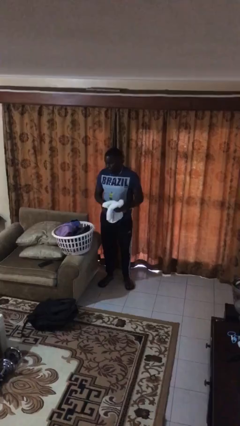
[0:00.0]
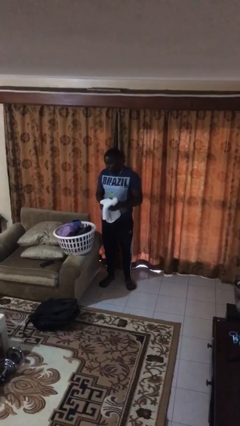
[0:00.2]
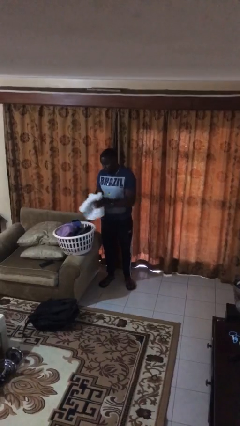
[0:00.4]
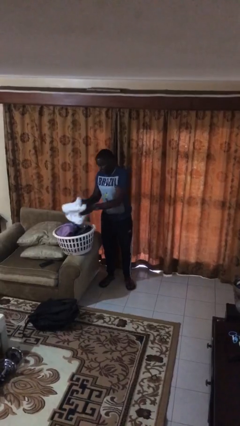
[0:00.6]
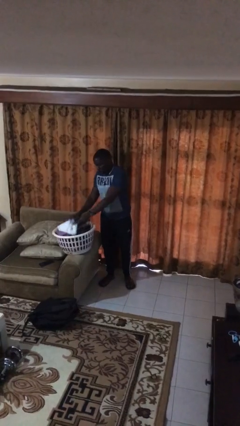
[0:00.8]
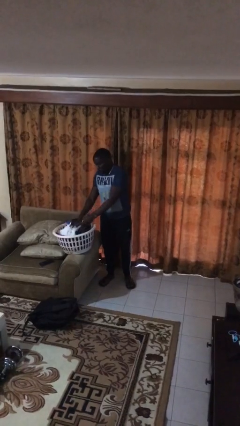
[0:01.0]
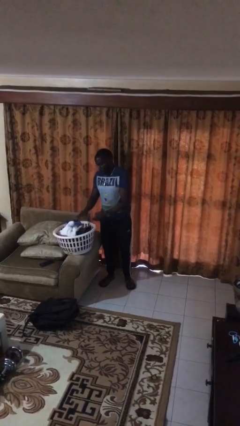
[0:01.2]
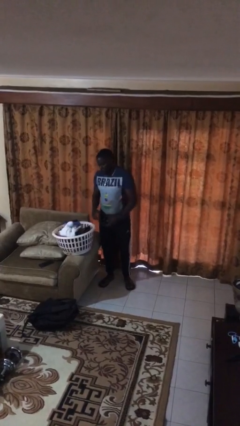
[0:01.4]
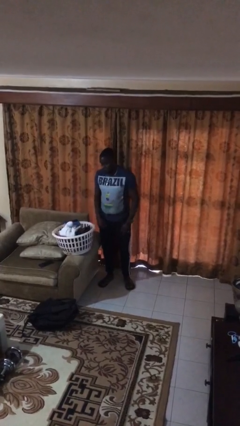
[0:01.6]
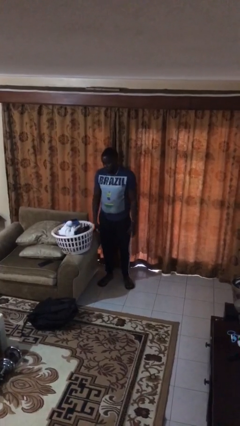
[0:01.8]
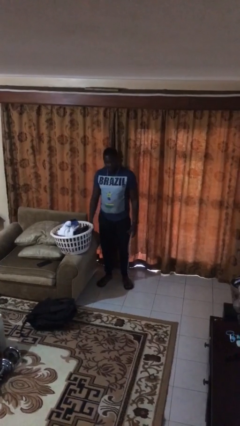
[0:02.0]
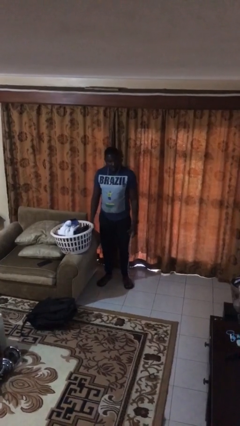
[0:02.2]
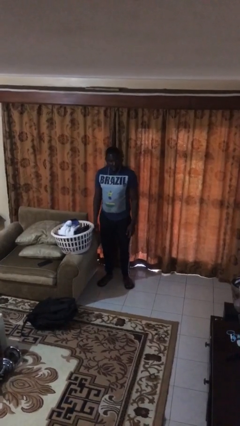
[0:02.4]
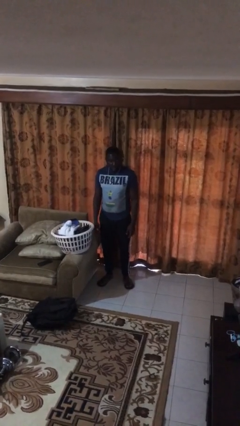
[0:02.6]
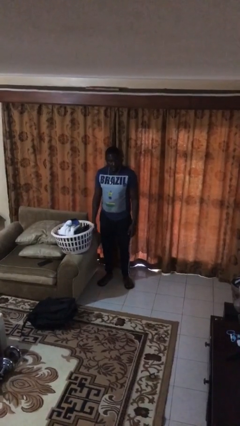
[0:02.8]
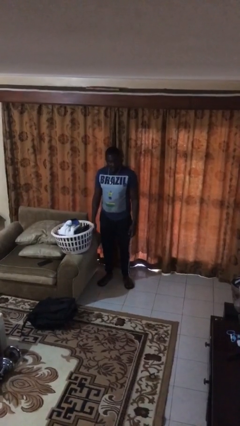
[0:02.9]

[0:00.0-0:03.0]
person puts object into basket

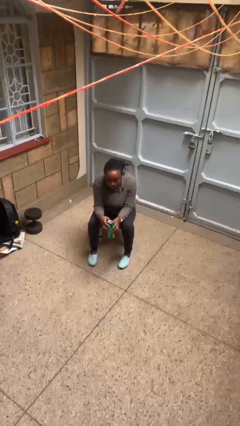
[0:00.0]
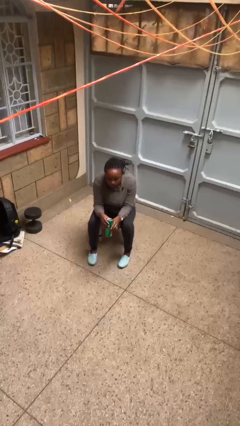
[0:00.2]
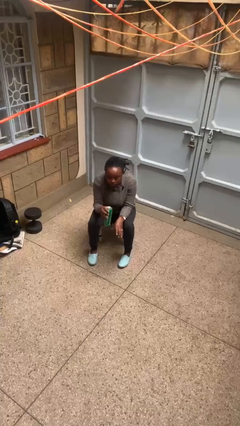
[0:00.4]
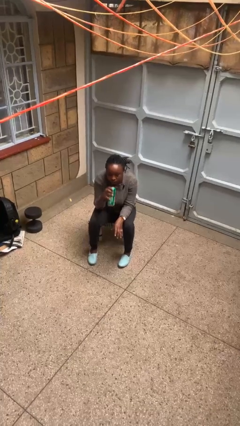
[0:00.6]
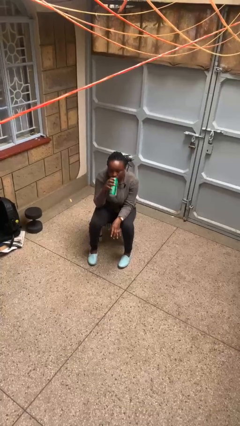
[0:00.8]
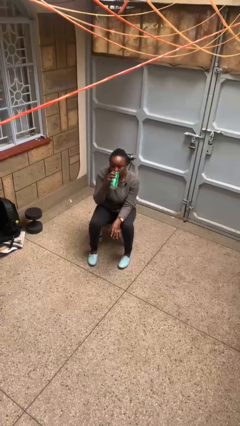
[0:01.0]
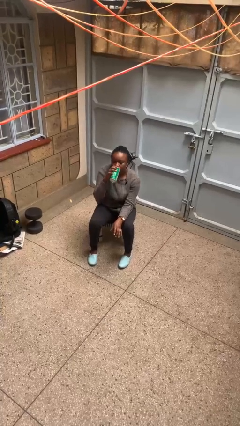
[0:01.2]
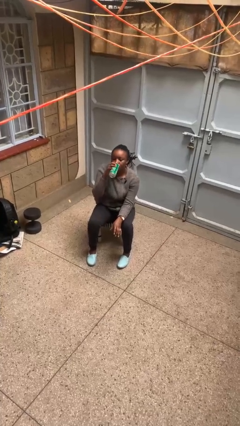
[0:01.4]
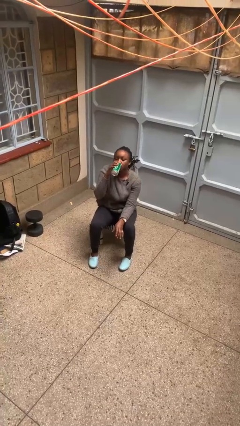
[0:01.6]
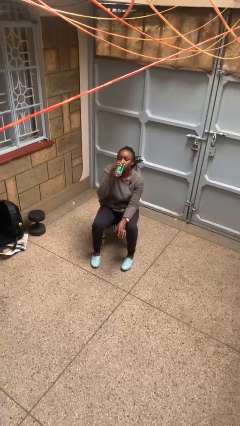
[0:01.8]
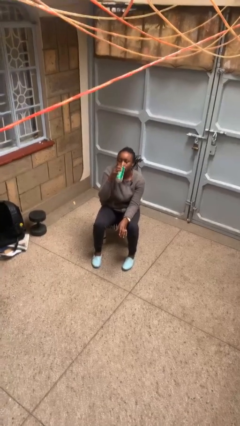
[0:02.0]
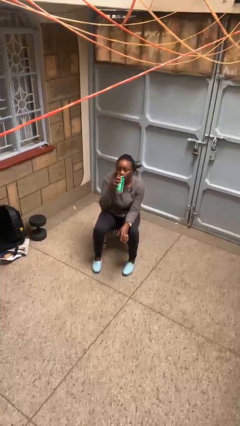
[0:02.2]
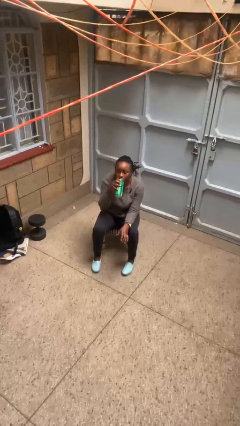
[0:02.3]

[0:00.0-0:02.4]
person drinks from beverage can

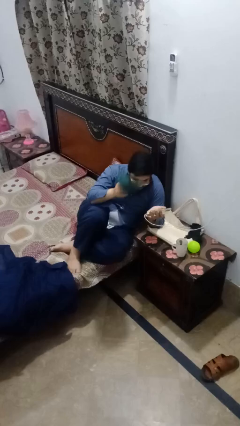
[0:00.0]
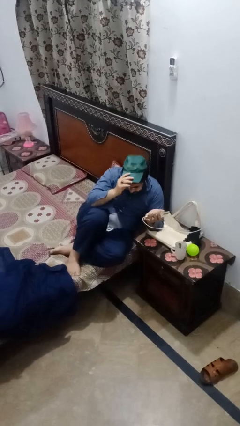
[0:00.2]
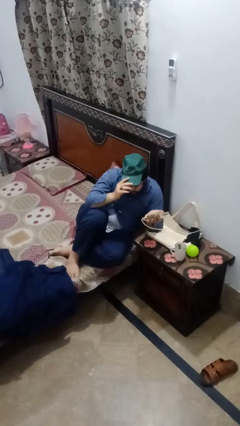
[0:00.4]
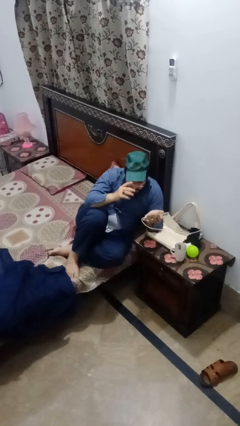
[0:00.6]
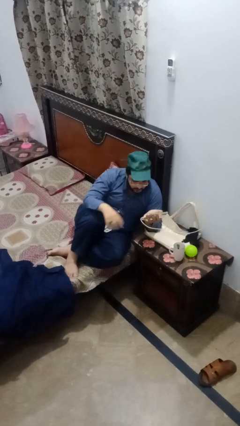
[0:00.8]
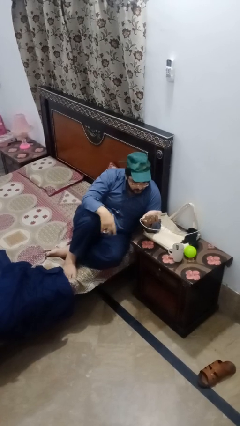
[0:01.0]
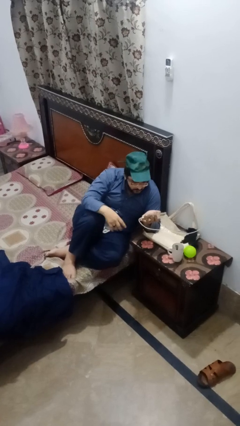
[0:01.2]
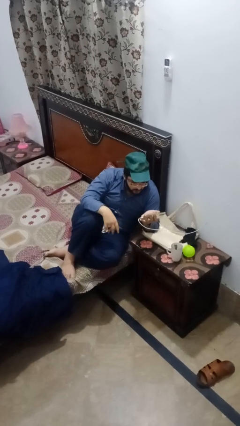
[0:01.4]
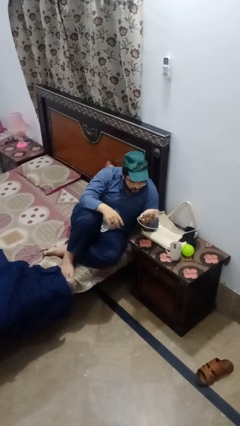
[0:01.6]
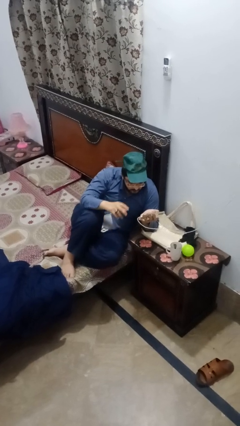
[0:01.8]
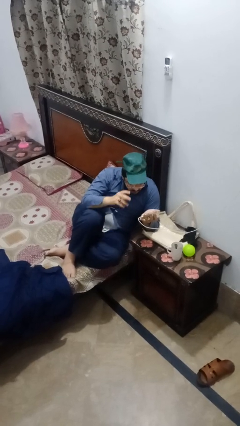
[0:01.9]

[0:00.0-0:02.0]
person puts on hat

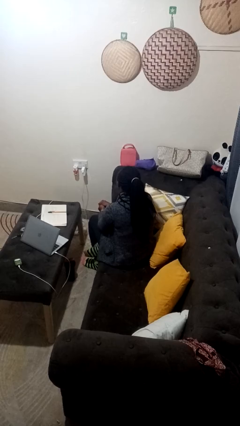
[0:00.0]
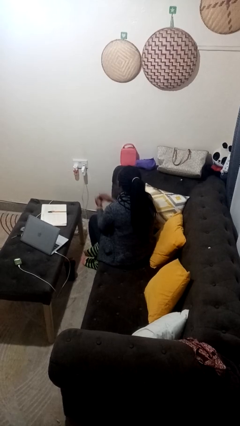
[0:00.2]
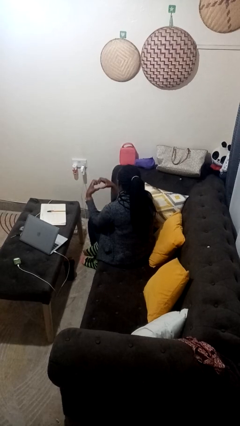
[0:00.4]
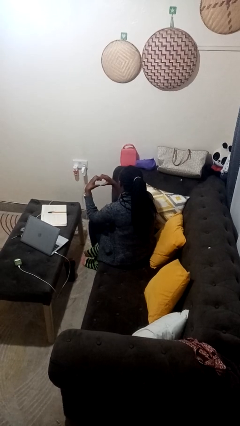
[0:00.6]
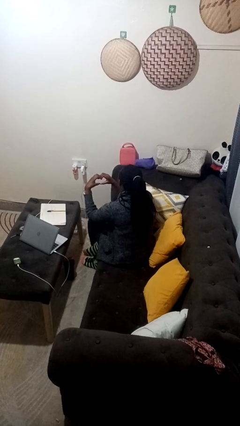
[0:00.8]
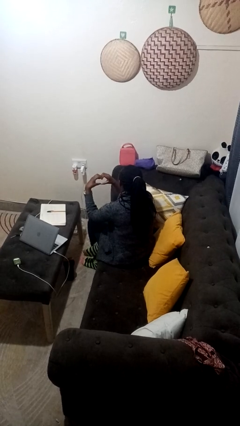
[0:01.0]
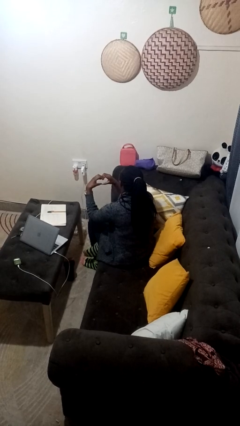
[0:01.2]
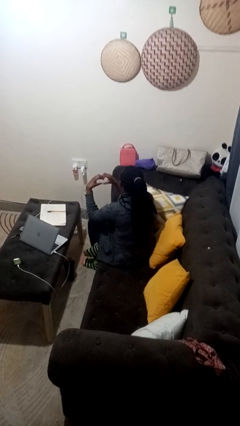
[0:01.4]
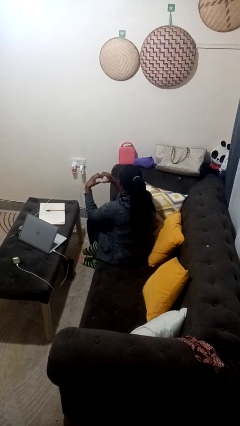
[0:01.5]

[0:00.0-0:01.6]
person gestures heart

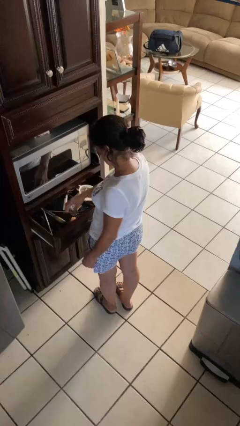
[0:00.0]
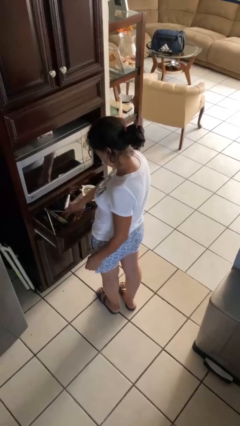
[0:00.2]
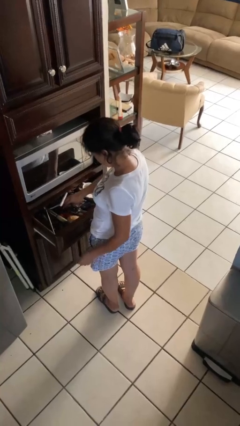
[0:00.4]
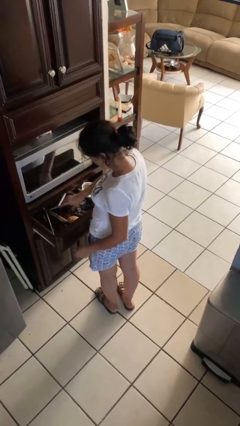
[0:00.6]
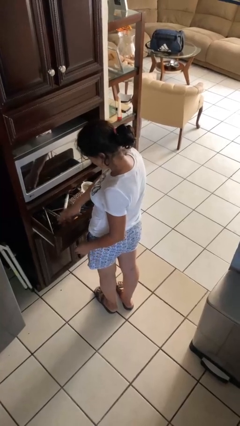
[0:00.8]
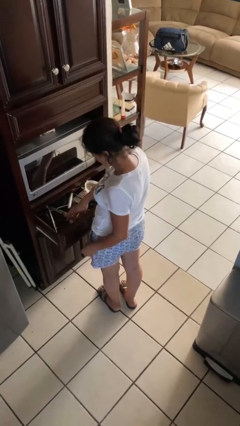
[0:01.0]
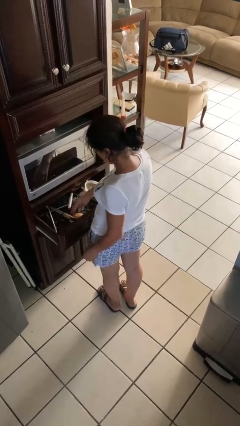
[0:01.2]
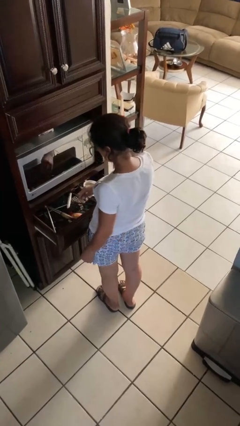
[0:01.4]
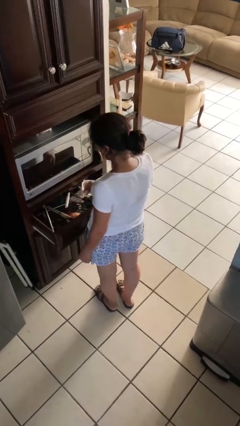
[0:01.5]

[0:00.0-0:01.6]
person searches in kitchen drawer

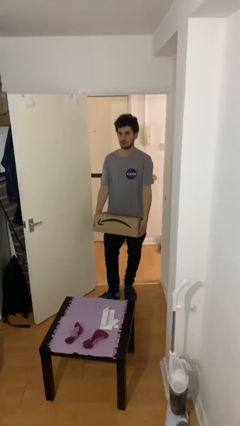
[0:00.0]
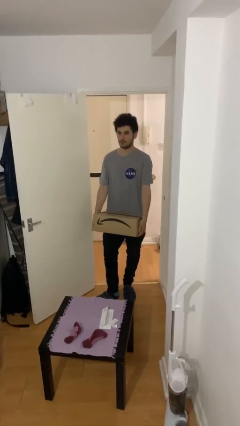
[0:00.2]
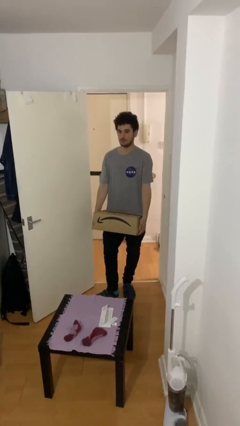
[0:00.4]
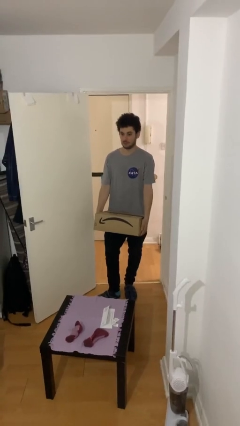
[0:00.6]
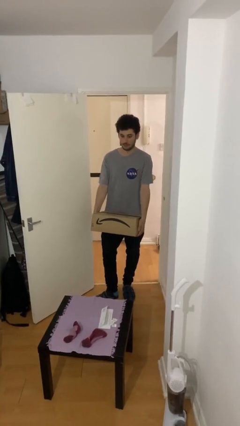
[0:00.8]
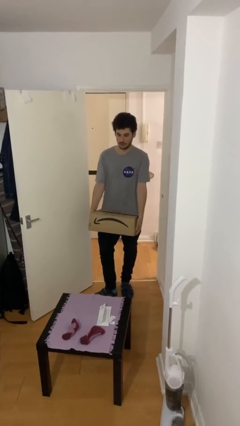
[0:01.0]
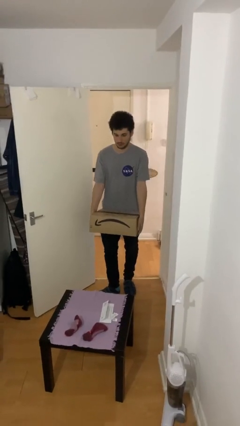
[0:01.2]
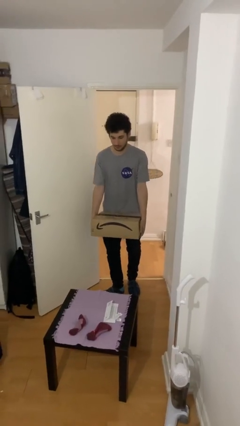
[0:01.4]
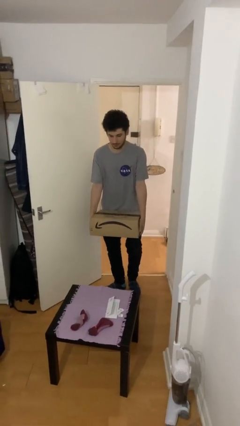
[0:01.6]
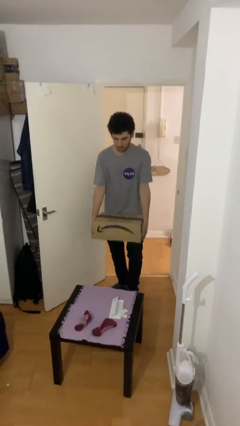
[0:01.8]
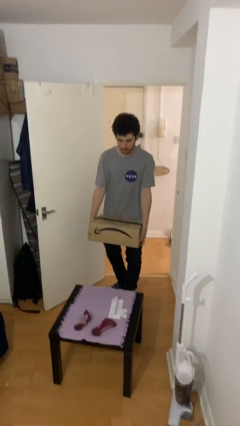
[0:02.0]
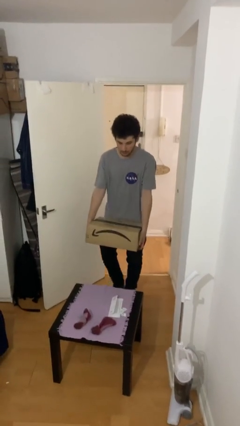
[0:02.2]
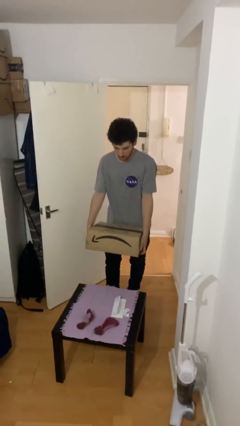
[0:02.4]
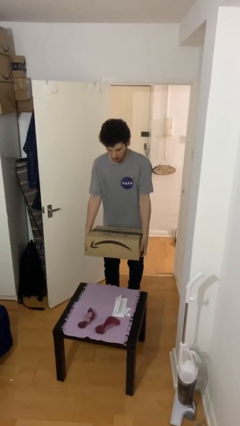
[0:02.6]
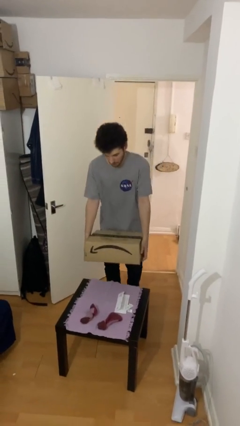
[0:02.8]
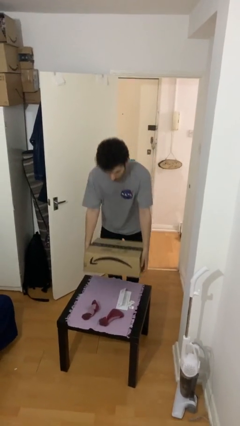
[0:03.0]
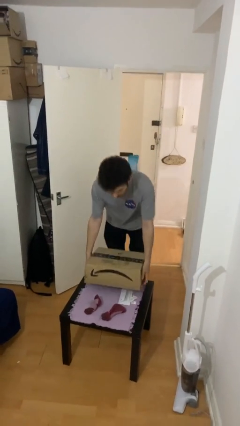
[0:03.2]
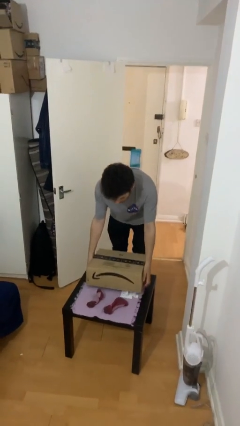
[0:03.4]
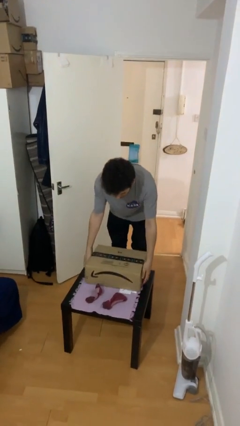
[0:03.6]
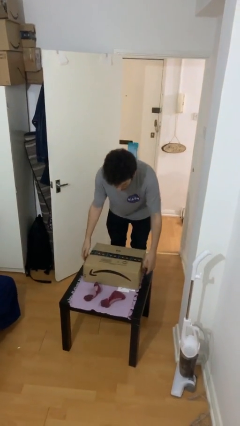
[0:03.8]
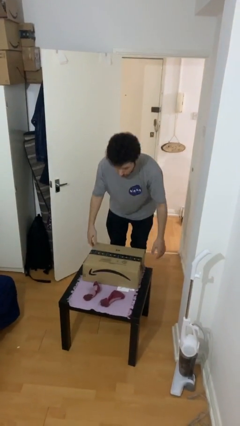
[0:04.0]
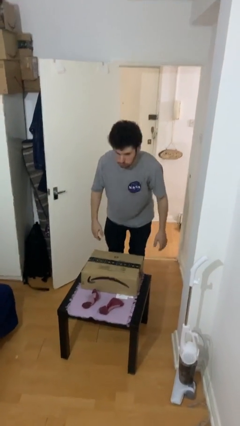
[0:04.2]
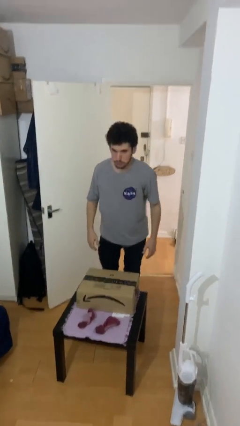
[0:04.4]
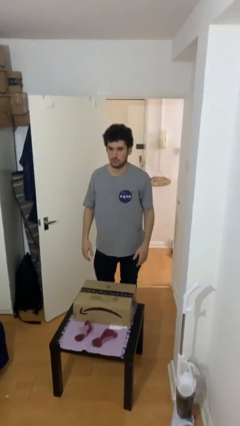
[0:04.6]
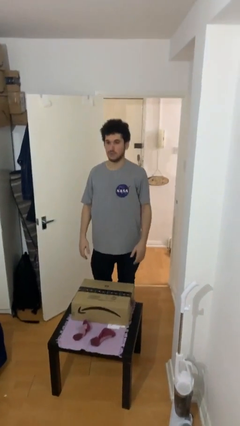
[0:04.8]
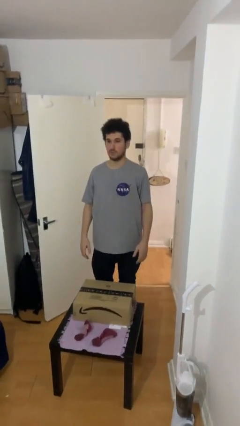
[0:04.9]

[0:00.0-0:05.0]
person puts down object on table

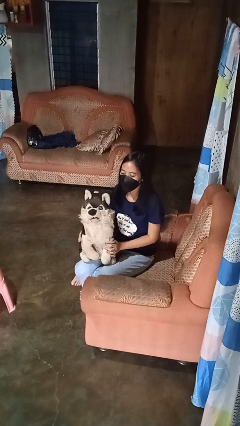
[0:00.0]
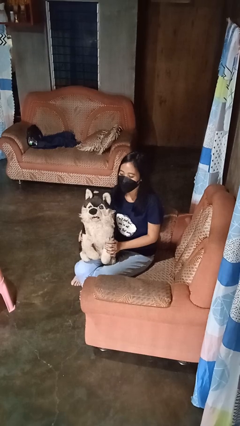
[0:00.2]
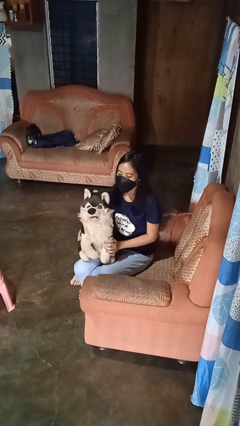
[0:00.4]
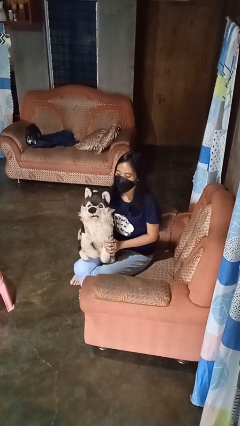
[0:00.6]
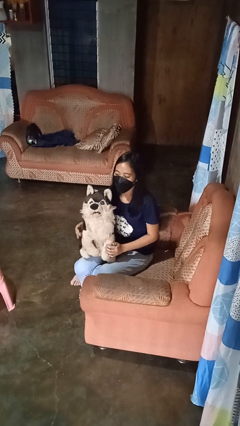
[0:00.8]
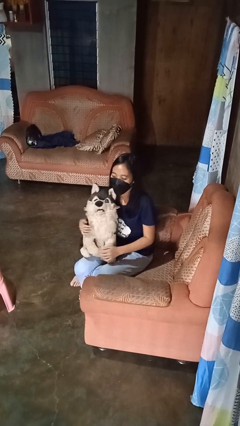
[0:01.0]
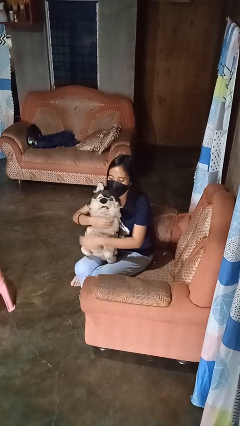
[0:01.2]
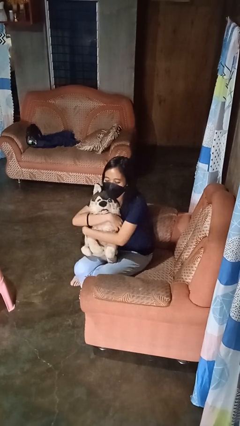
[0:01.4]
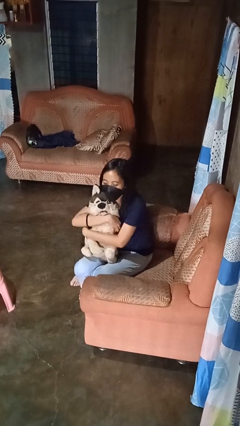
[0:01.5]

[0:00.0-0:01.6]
person hugs stuffed animal

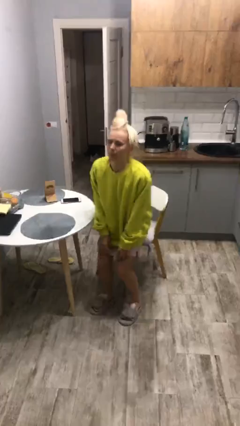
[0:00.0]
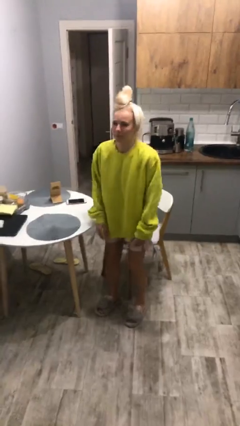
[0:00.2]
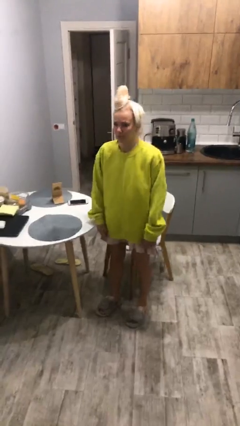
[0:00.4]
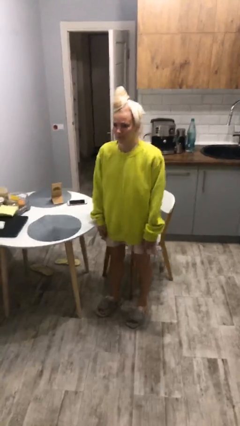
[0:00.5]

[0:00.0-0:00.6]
person stands up
